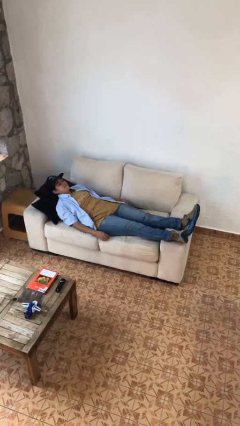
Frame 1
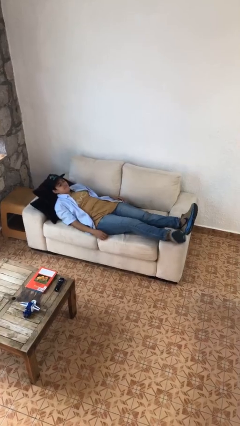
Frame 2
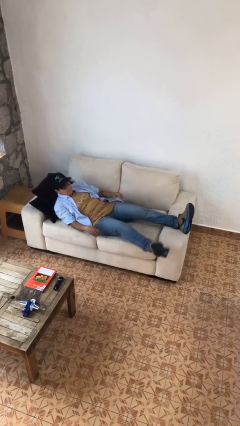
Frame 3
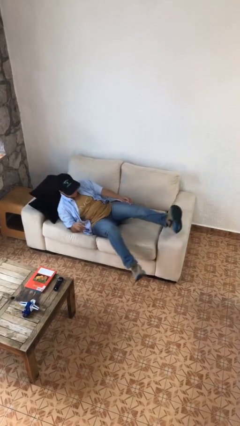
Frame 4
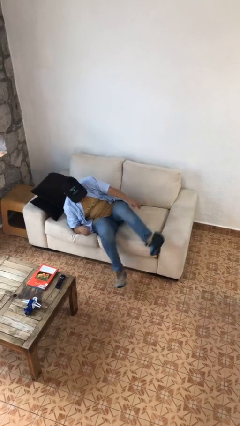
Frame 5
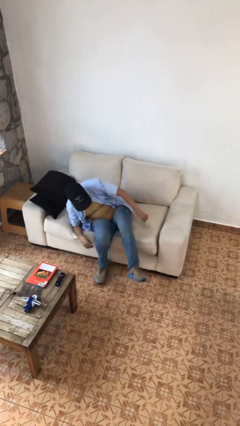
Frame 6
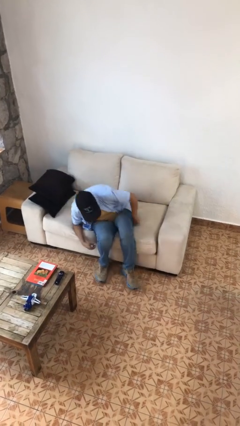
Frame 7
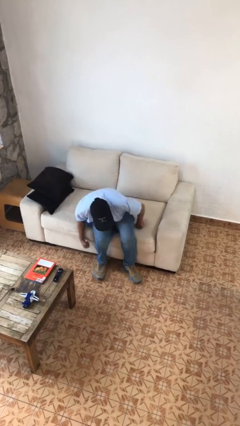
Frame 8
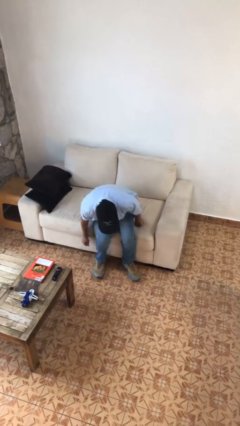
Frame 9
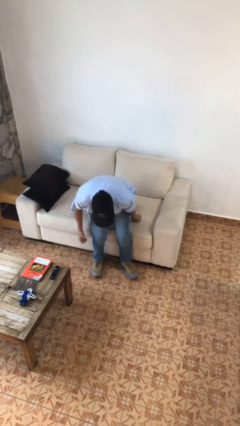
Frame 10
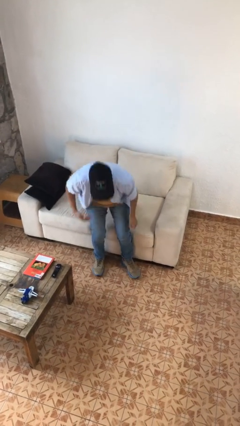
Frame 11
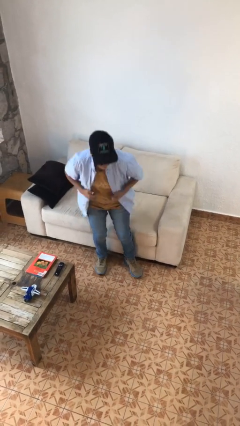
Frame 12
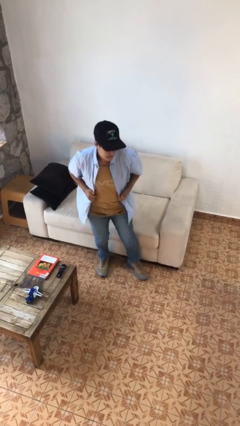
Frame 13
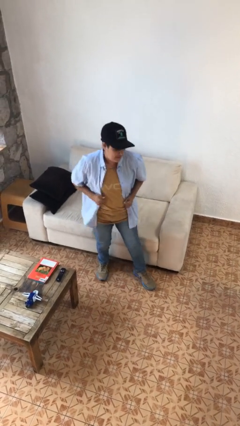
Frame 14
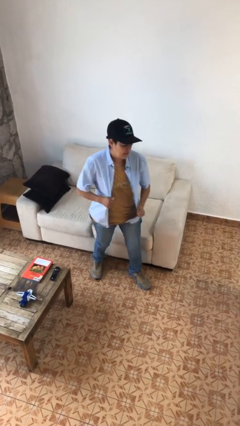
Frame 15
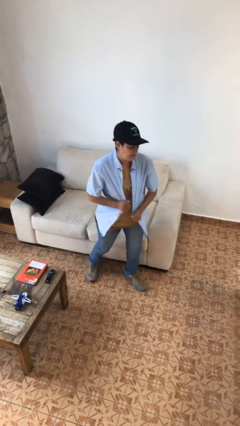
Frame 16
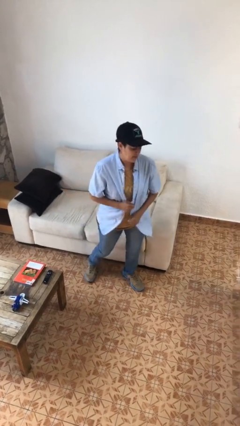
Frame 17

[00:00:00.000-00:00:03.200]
person stands up

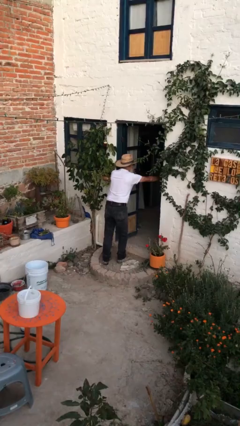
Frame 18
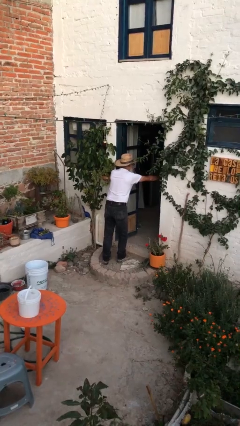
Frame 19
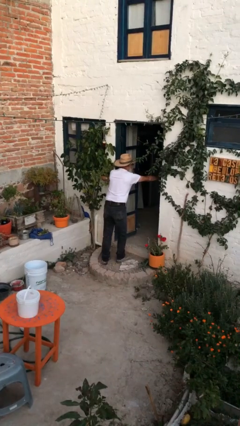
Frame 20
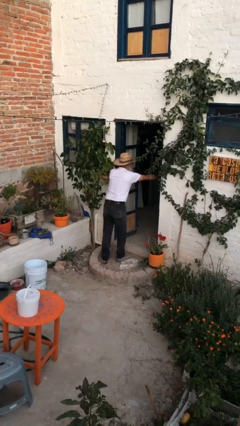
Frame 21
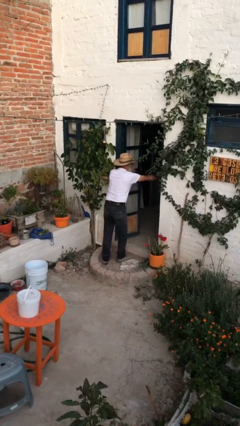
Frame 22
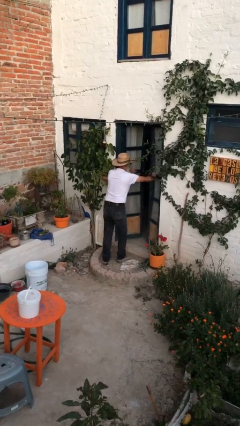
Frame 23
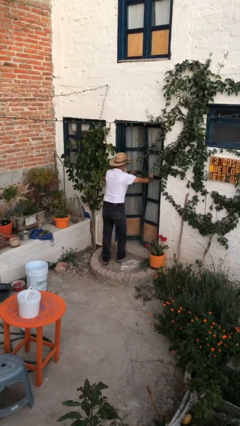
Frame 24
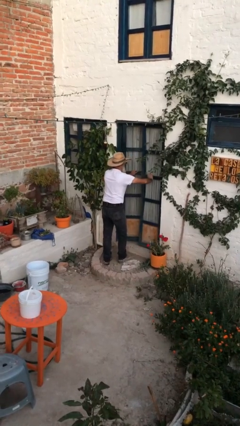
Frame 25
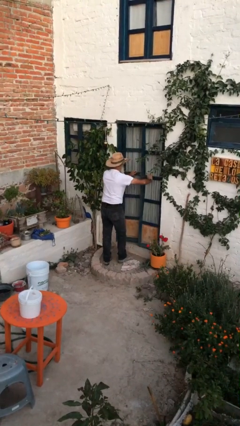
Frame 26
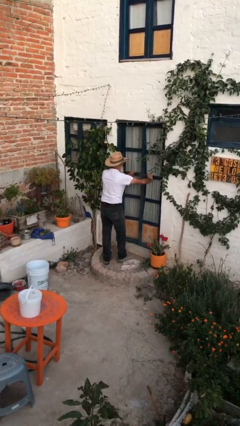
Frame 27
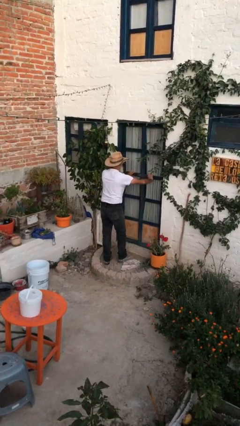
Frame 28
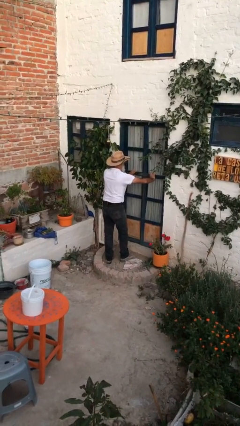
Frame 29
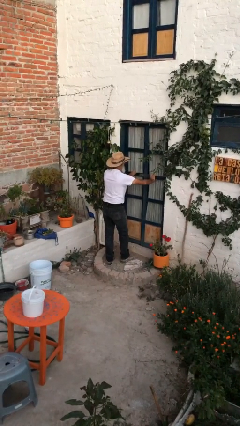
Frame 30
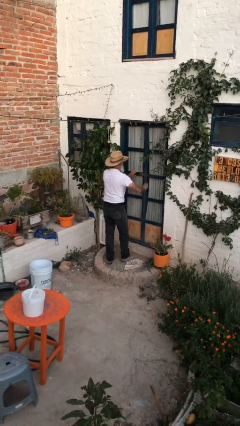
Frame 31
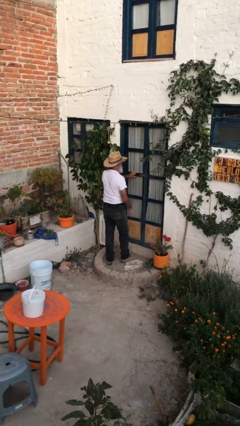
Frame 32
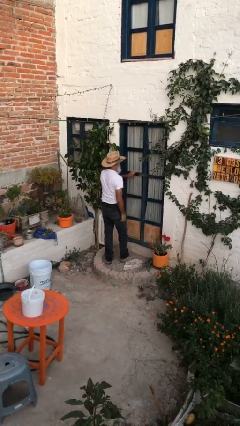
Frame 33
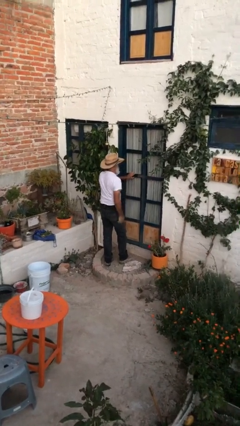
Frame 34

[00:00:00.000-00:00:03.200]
person closes facility door

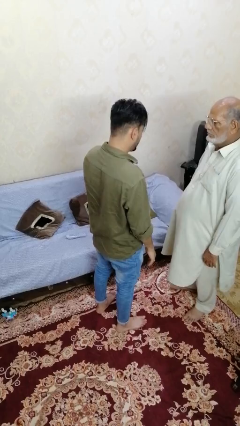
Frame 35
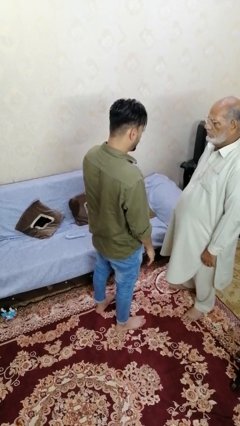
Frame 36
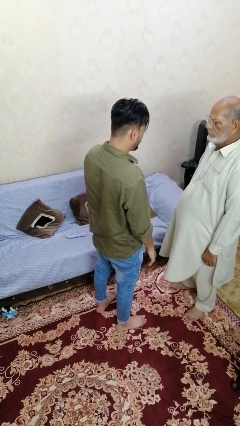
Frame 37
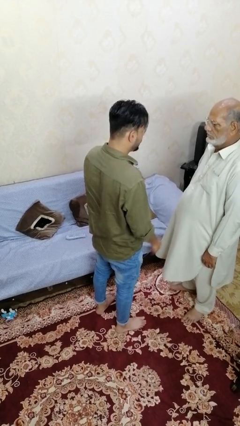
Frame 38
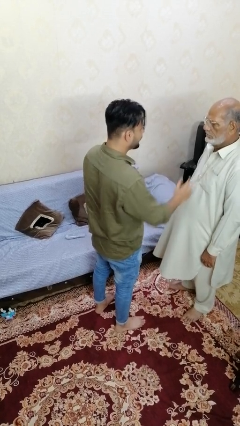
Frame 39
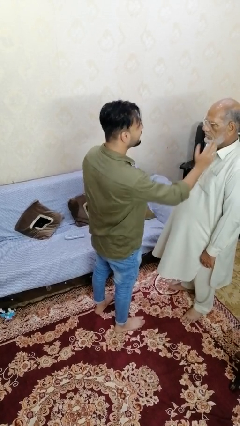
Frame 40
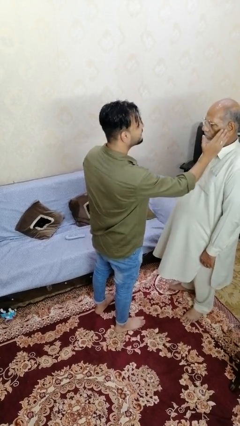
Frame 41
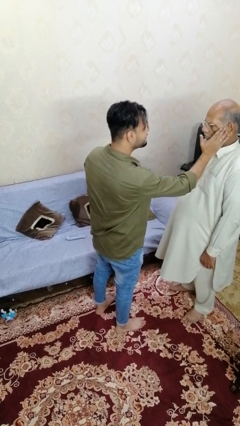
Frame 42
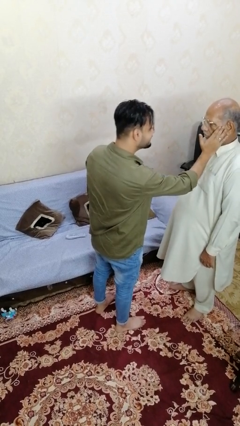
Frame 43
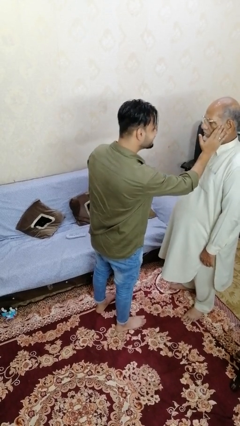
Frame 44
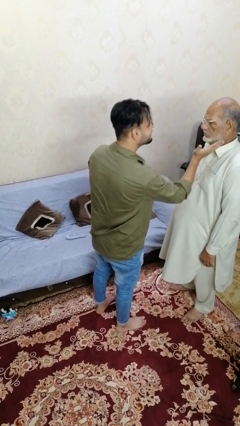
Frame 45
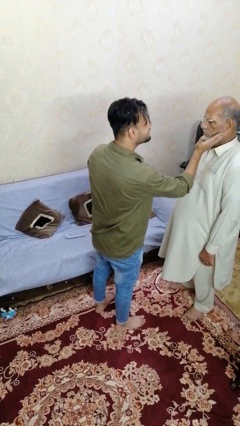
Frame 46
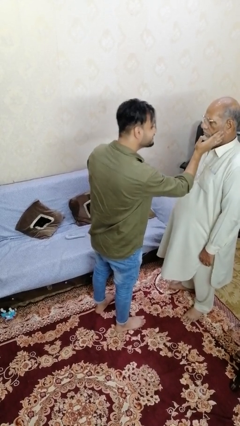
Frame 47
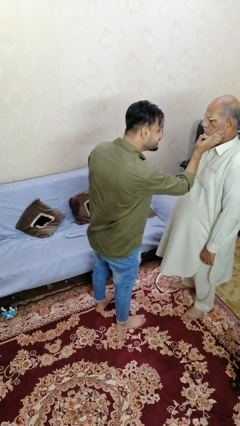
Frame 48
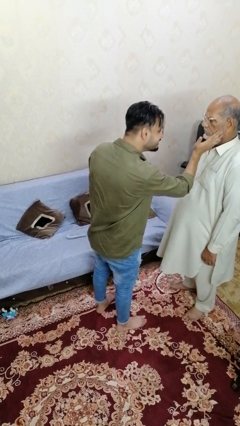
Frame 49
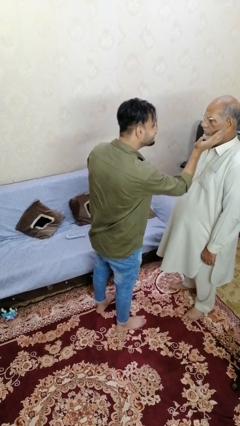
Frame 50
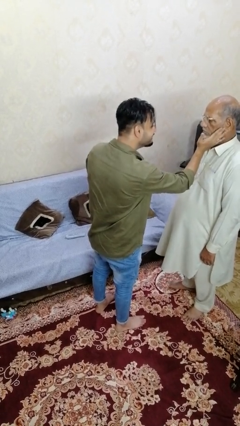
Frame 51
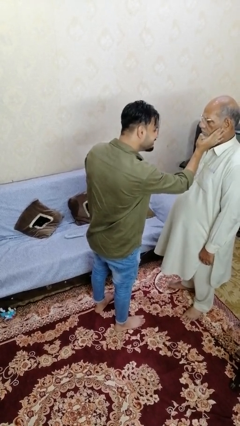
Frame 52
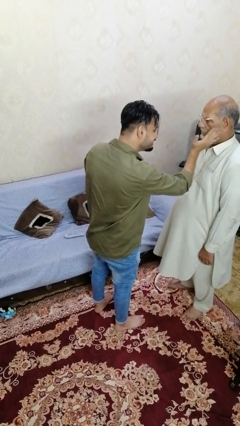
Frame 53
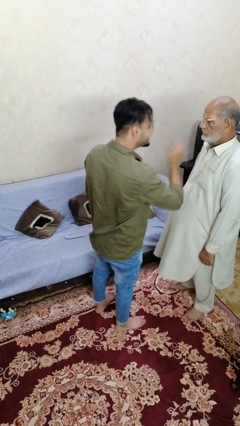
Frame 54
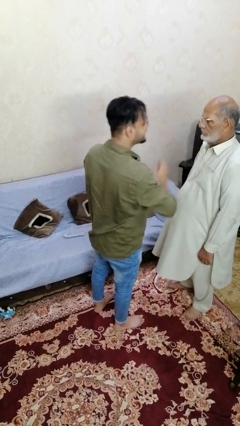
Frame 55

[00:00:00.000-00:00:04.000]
person touches face of person

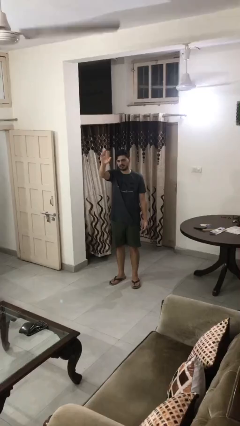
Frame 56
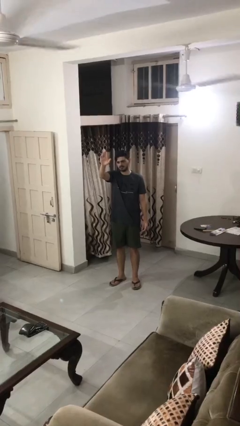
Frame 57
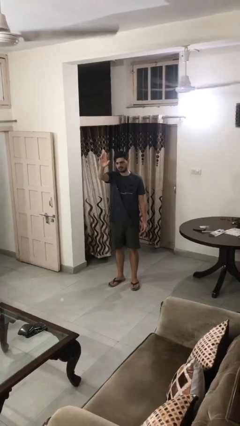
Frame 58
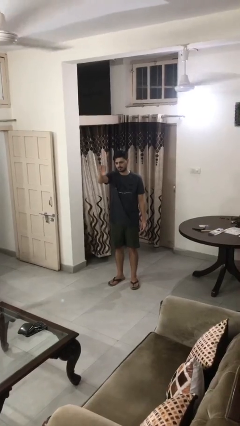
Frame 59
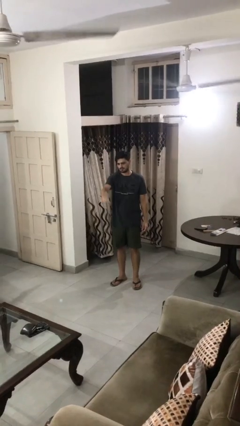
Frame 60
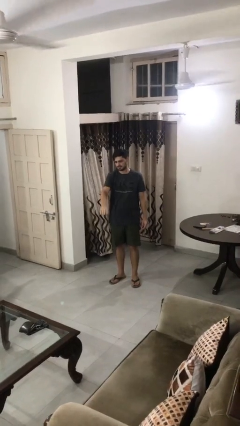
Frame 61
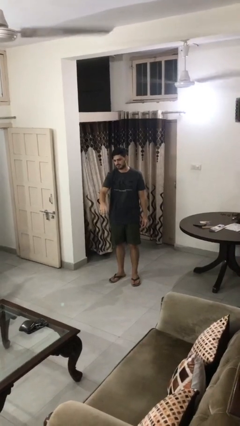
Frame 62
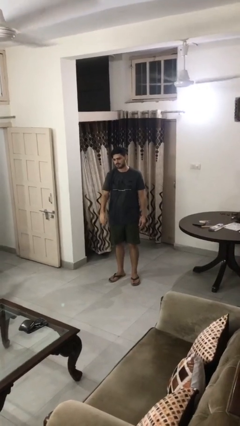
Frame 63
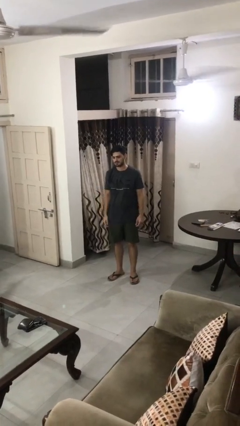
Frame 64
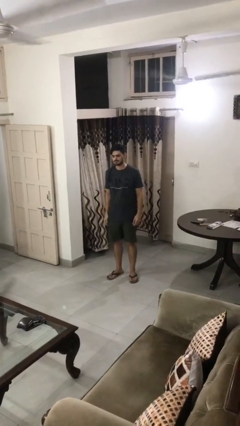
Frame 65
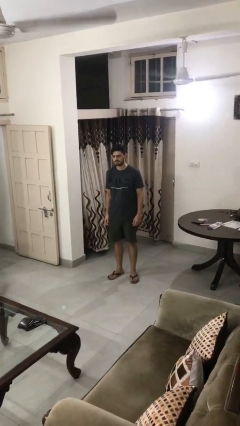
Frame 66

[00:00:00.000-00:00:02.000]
person gestures swipe down

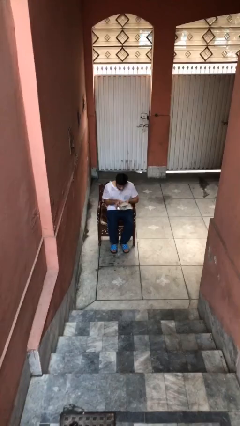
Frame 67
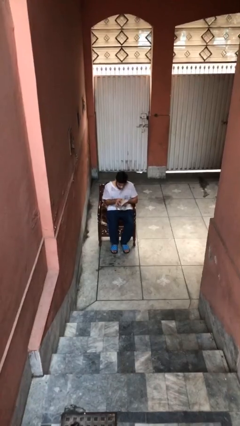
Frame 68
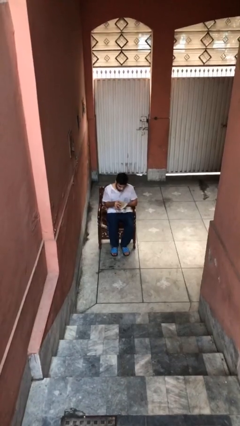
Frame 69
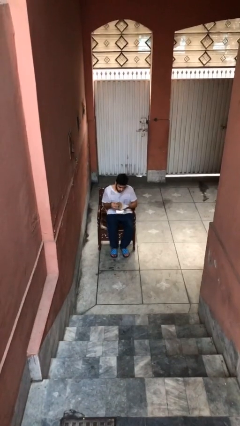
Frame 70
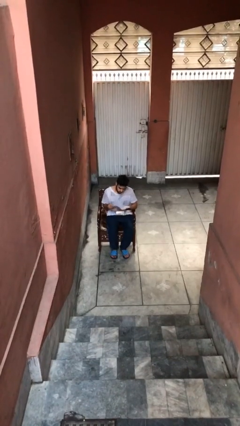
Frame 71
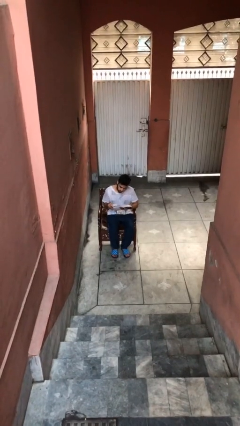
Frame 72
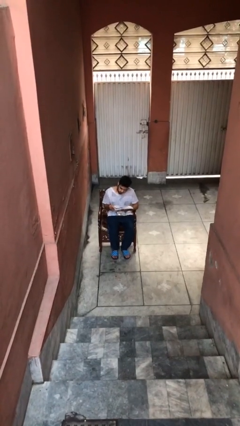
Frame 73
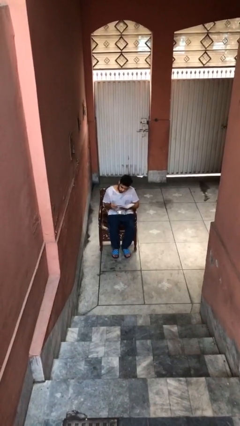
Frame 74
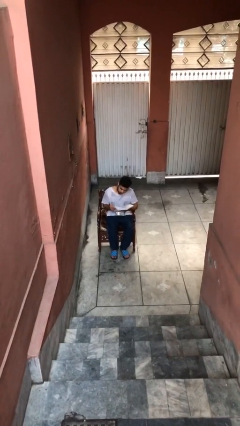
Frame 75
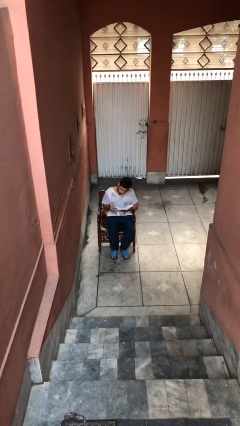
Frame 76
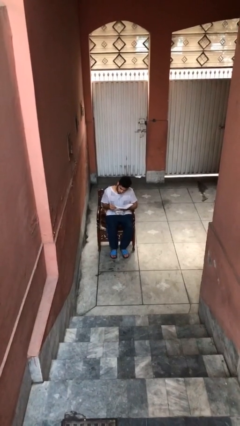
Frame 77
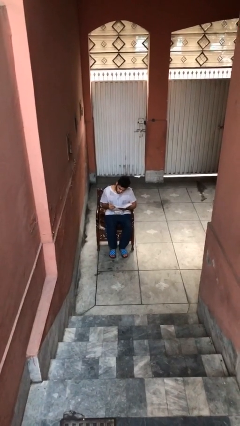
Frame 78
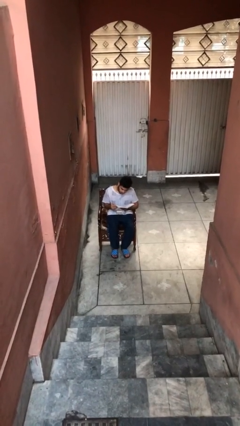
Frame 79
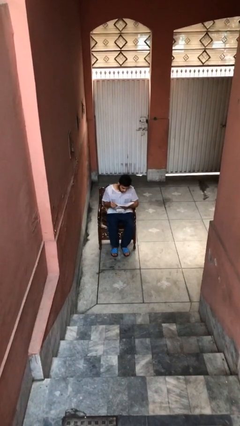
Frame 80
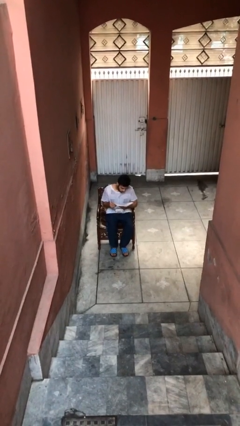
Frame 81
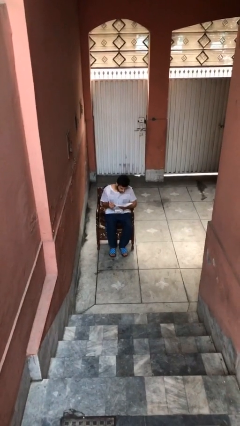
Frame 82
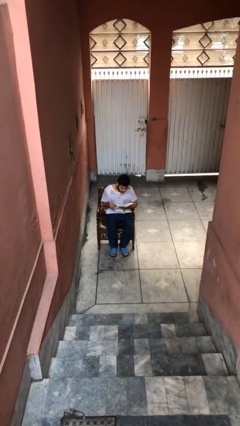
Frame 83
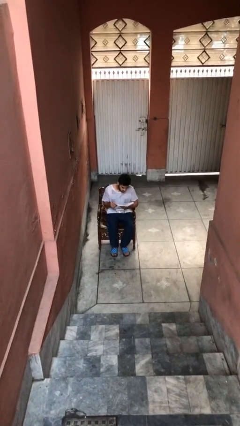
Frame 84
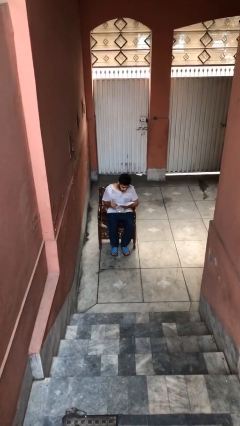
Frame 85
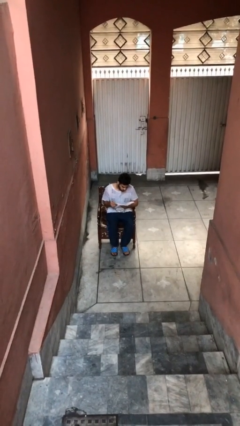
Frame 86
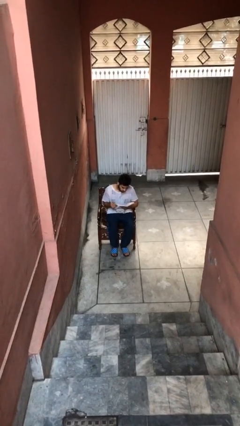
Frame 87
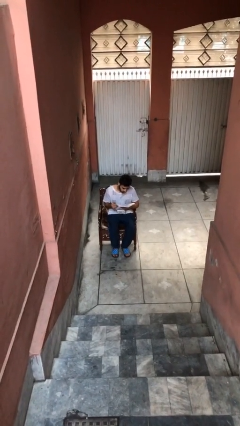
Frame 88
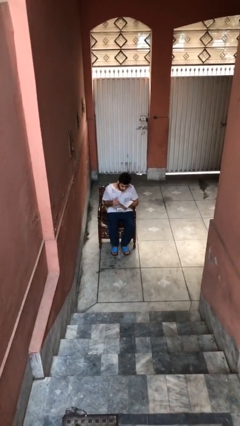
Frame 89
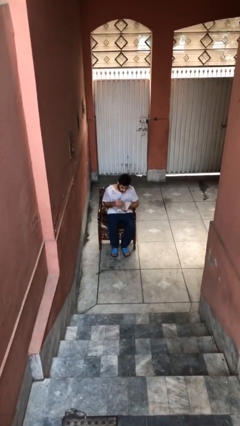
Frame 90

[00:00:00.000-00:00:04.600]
person reads document

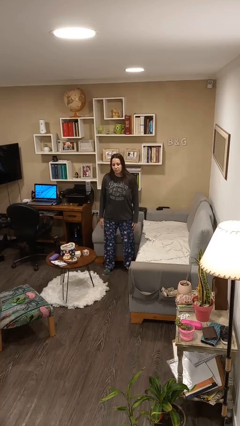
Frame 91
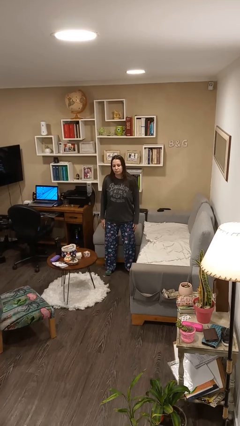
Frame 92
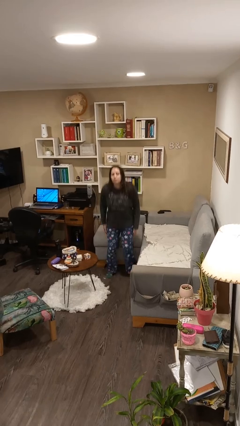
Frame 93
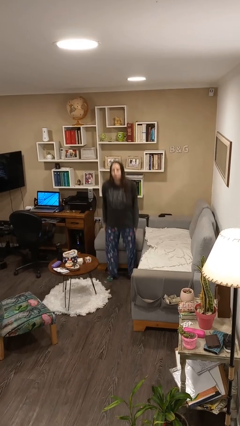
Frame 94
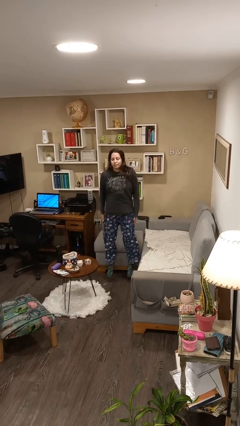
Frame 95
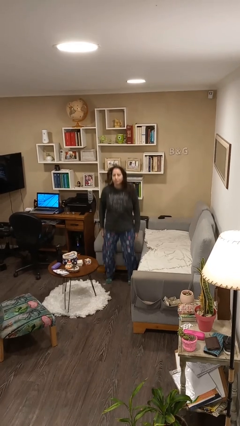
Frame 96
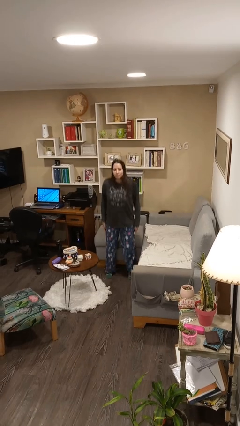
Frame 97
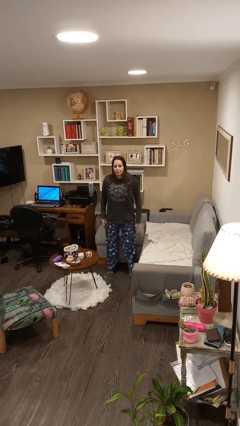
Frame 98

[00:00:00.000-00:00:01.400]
person jumps
